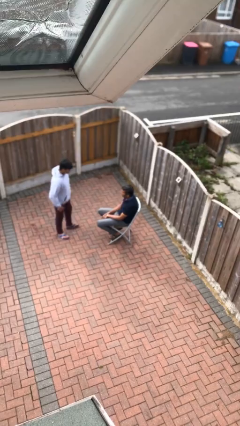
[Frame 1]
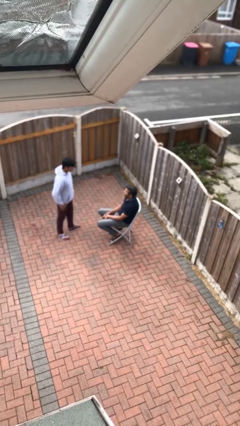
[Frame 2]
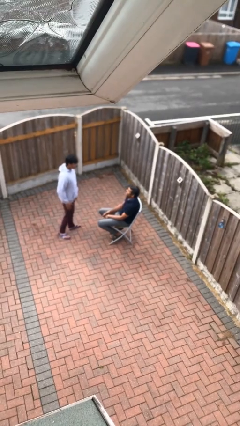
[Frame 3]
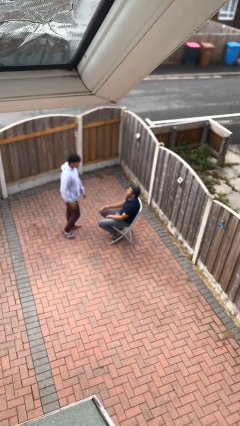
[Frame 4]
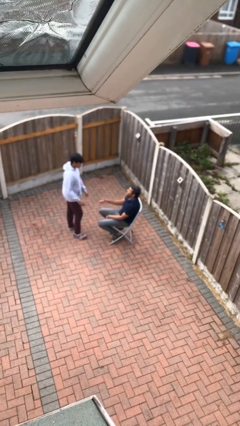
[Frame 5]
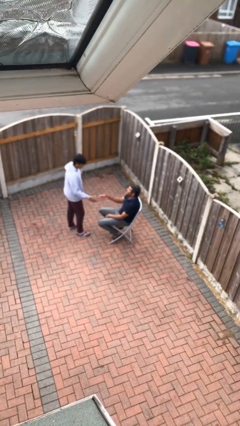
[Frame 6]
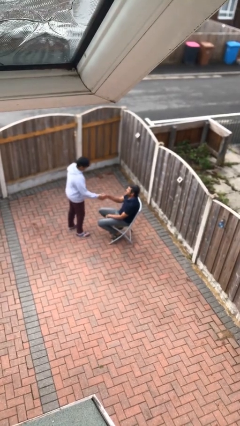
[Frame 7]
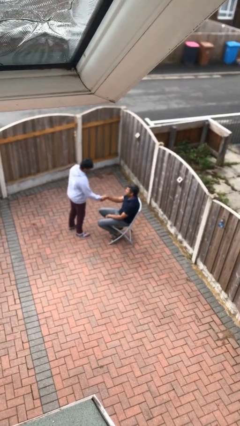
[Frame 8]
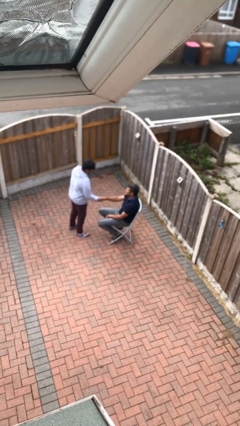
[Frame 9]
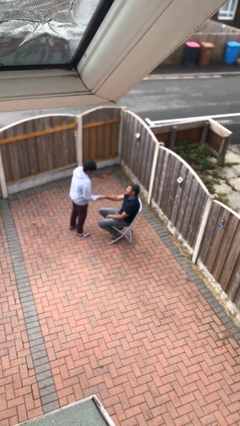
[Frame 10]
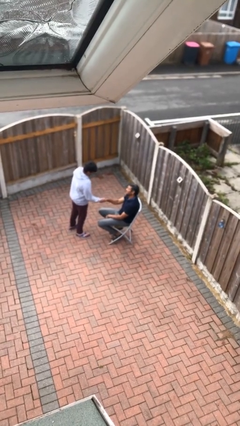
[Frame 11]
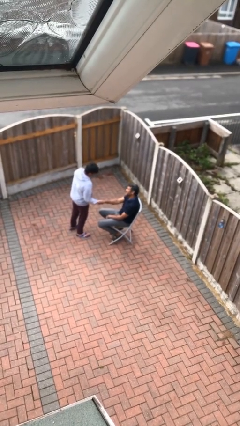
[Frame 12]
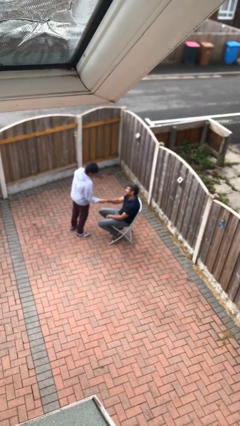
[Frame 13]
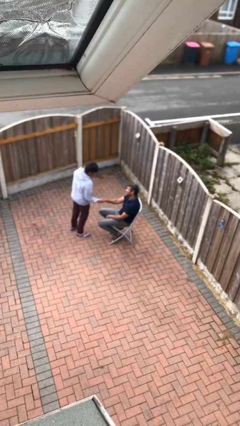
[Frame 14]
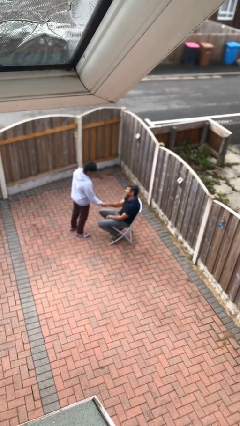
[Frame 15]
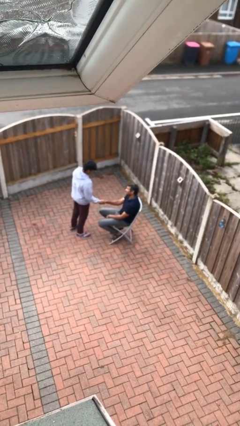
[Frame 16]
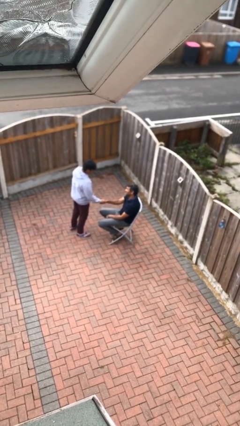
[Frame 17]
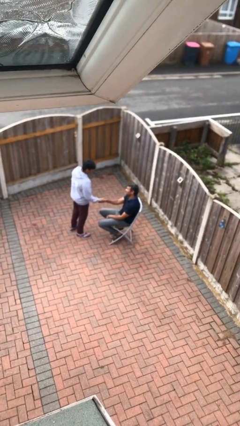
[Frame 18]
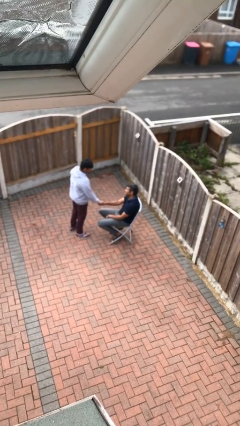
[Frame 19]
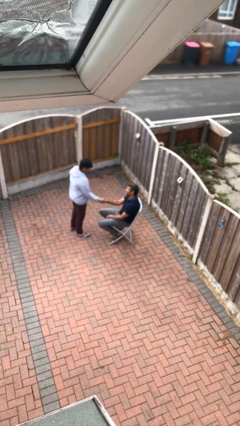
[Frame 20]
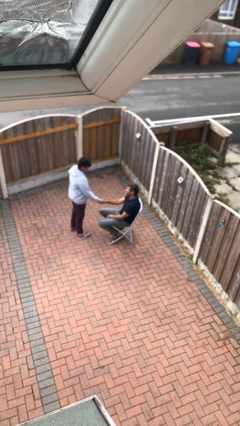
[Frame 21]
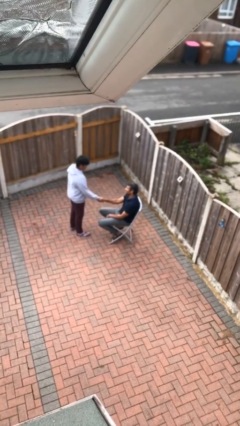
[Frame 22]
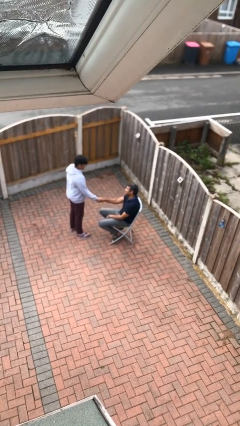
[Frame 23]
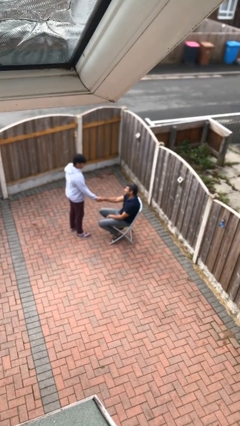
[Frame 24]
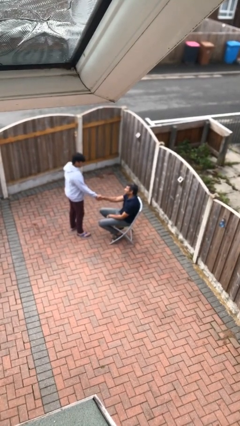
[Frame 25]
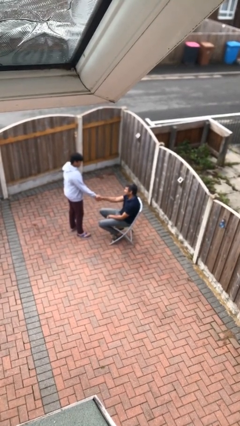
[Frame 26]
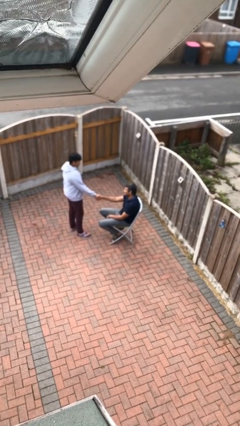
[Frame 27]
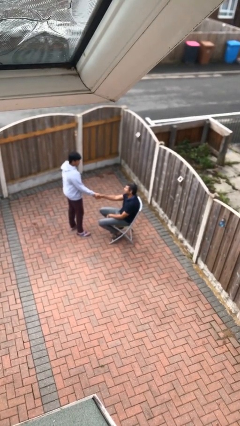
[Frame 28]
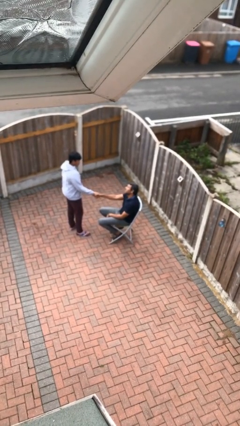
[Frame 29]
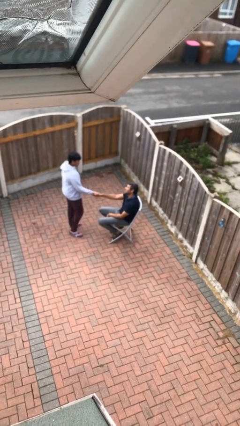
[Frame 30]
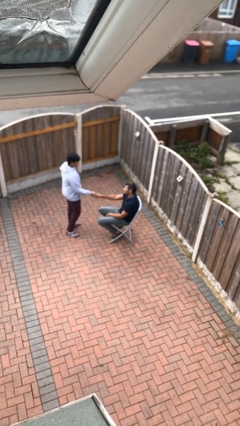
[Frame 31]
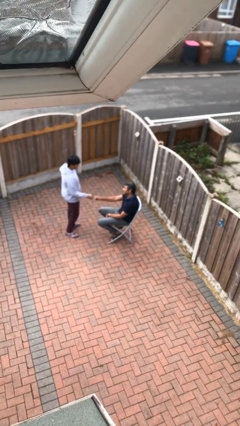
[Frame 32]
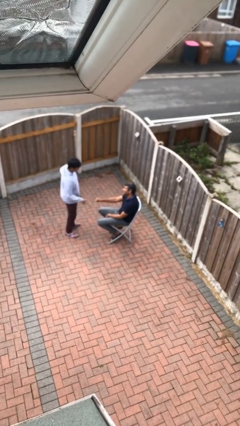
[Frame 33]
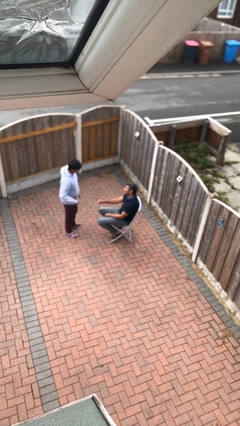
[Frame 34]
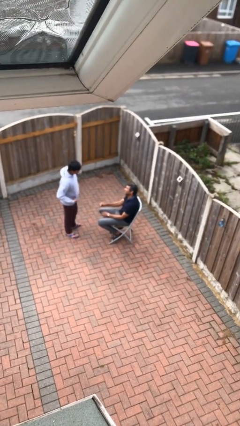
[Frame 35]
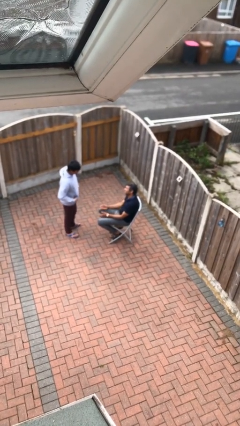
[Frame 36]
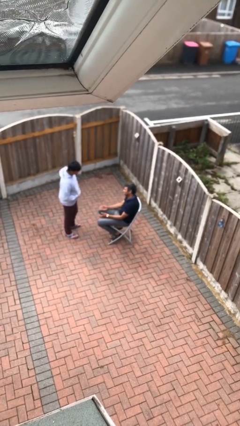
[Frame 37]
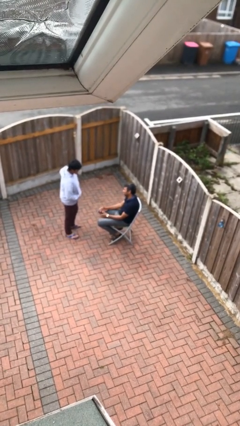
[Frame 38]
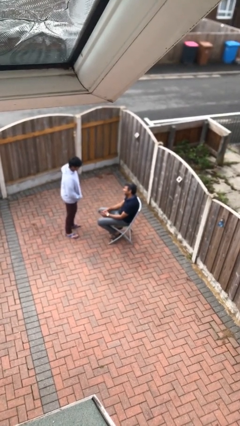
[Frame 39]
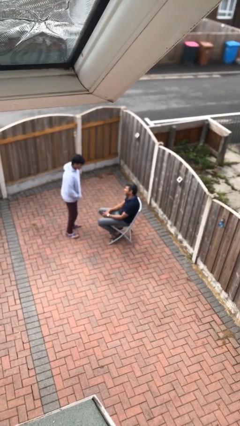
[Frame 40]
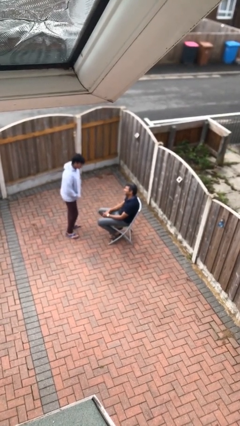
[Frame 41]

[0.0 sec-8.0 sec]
person shakes hand

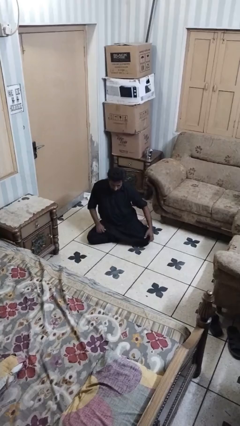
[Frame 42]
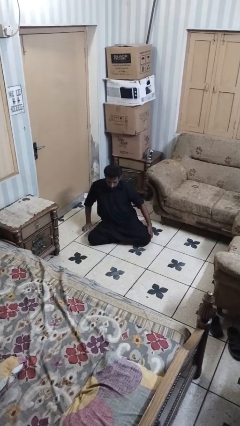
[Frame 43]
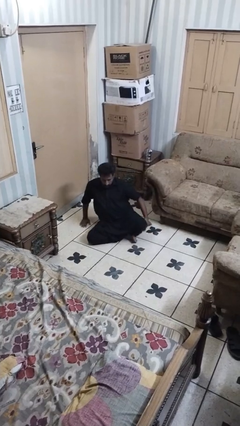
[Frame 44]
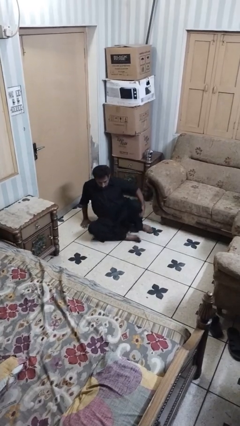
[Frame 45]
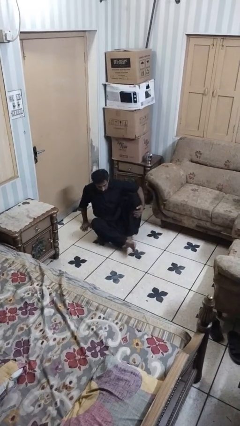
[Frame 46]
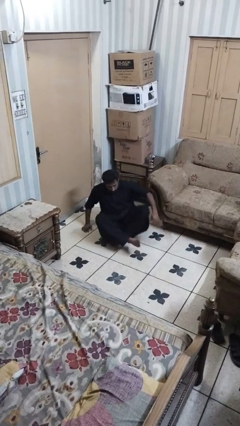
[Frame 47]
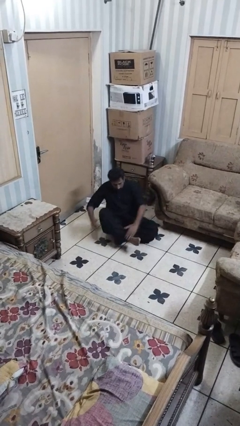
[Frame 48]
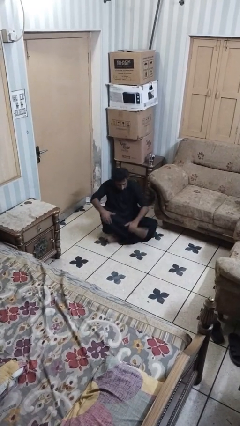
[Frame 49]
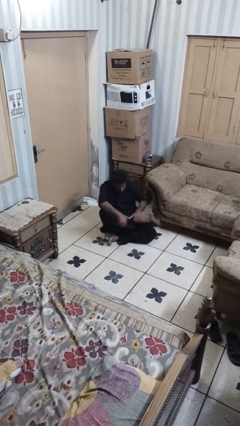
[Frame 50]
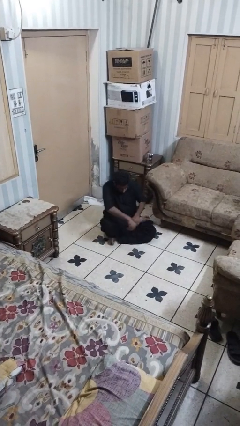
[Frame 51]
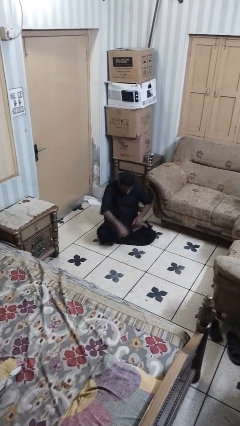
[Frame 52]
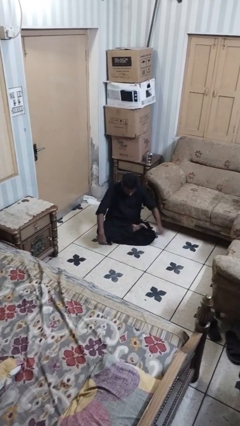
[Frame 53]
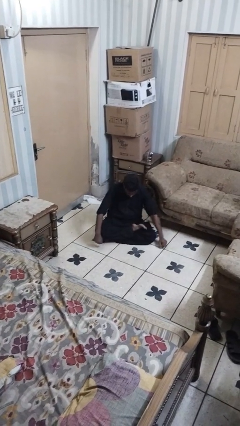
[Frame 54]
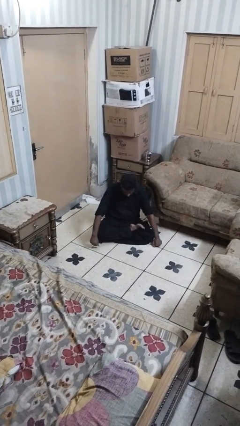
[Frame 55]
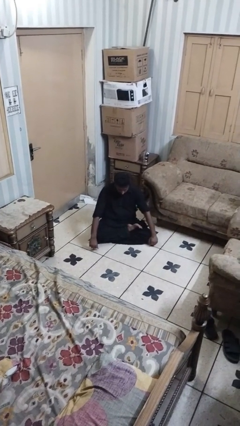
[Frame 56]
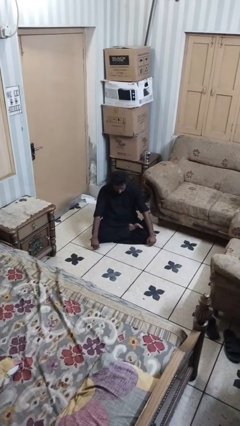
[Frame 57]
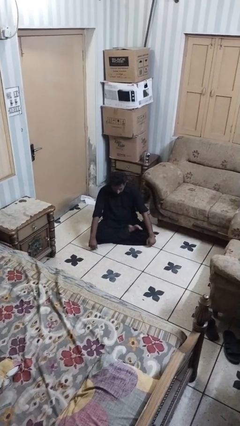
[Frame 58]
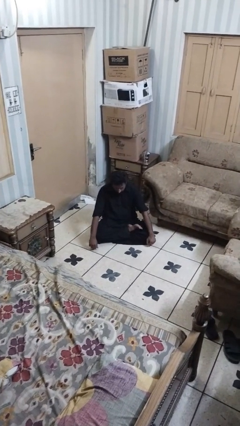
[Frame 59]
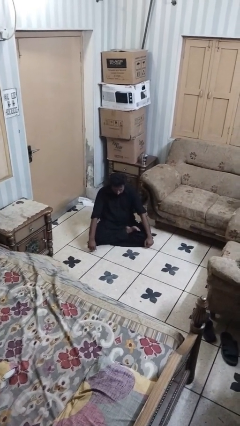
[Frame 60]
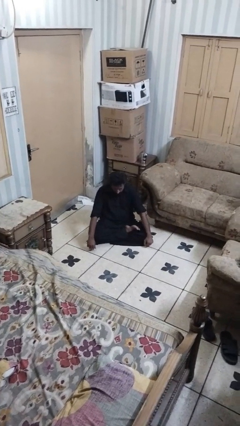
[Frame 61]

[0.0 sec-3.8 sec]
person crosses legs

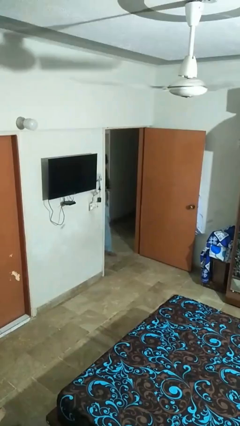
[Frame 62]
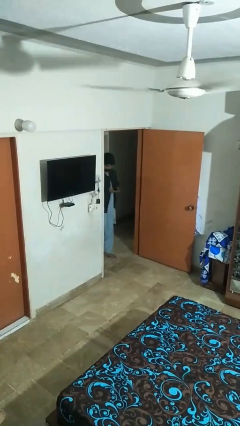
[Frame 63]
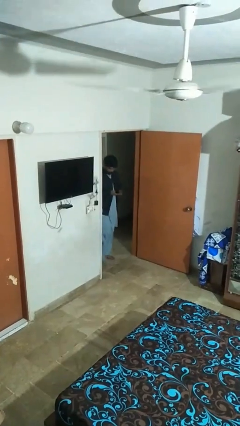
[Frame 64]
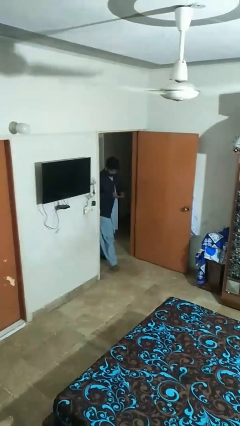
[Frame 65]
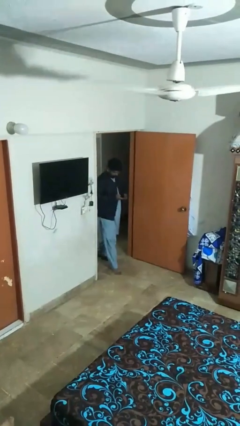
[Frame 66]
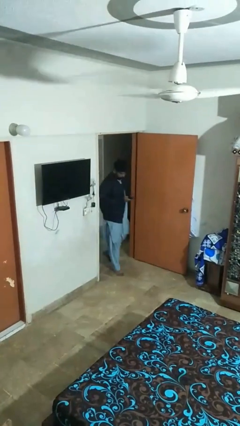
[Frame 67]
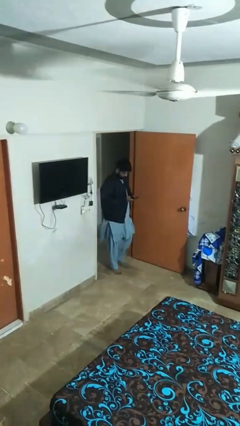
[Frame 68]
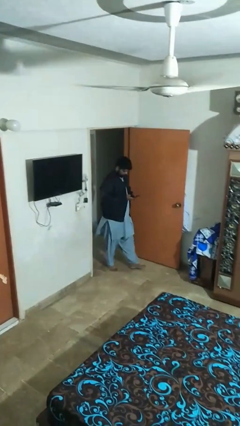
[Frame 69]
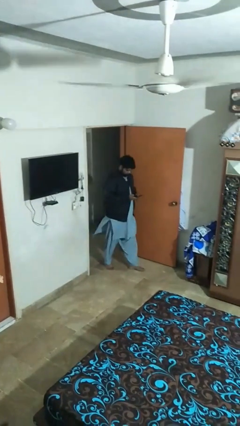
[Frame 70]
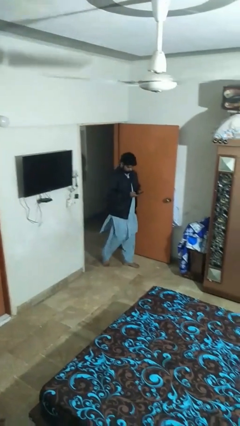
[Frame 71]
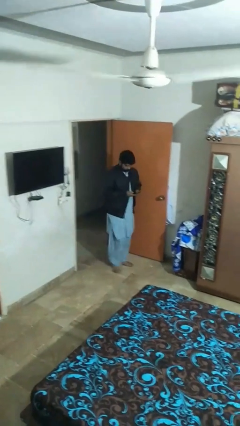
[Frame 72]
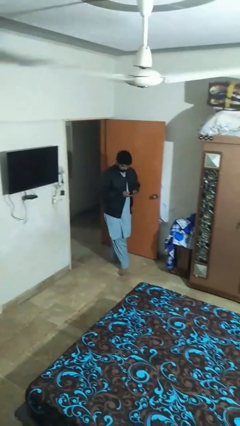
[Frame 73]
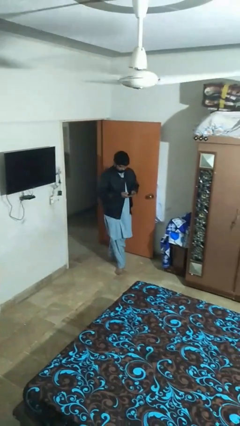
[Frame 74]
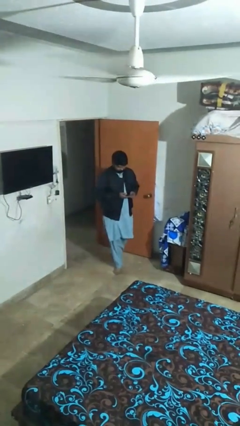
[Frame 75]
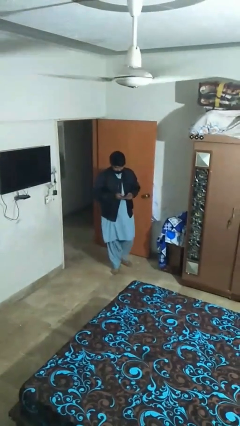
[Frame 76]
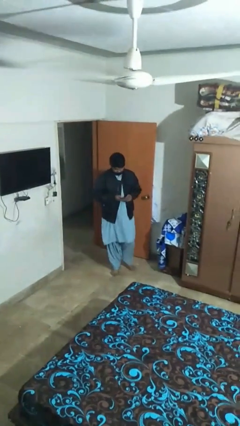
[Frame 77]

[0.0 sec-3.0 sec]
person enters scene through structure

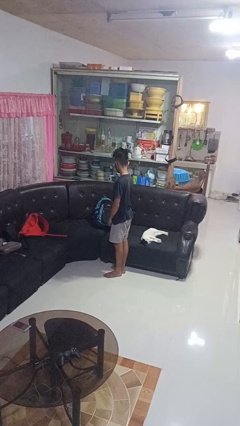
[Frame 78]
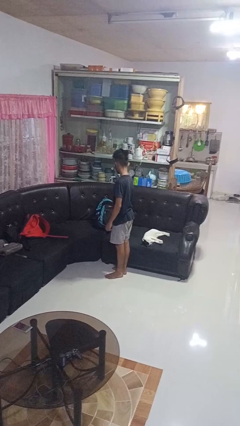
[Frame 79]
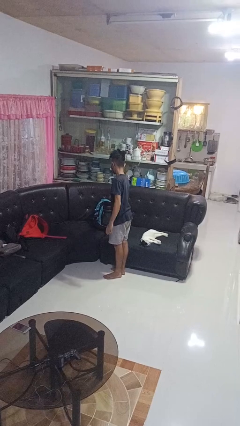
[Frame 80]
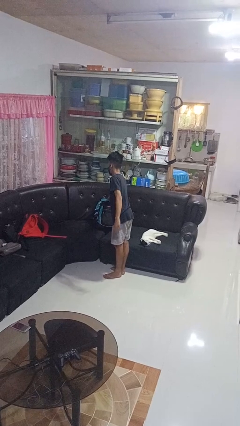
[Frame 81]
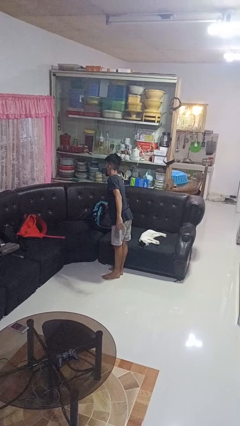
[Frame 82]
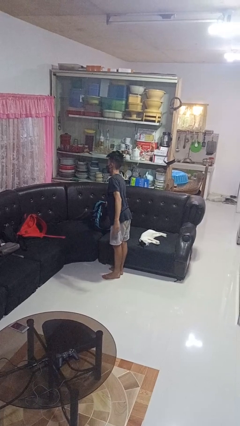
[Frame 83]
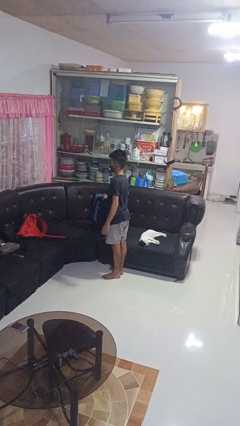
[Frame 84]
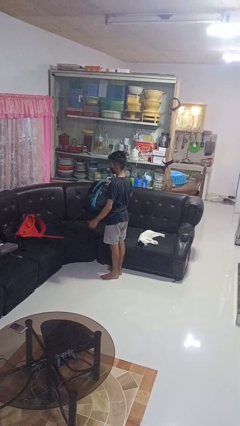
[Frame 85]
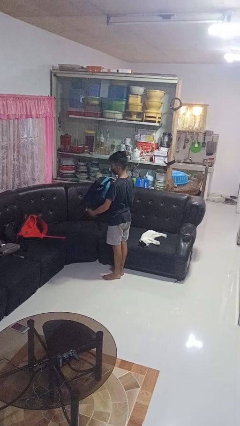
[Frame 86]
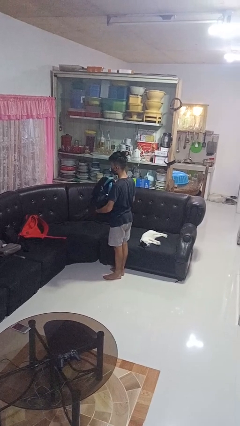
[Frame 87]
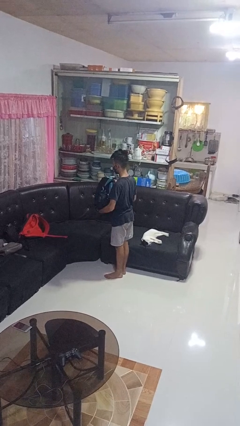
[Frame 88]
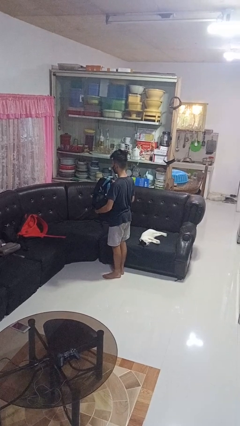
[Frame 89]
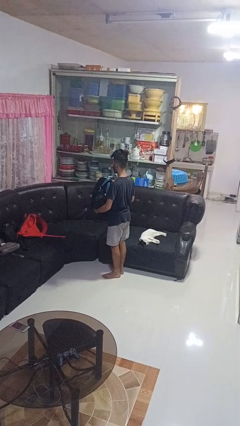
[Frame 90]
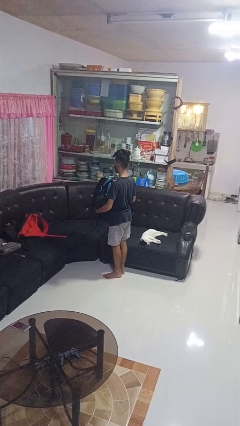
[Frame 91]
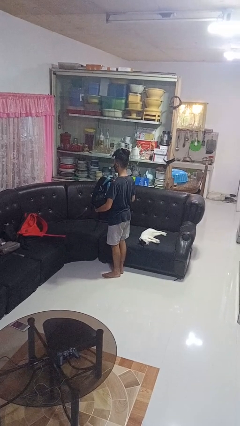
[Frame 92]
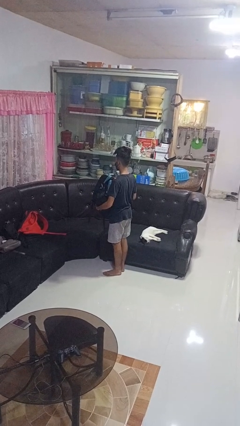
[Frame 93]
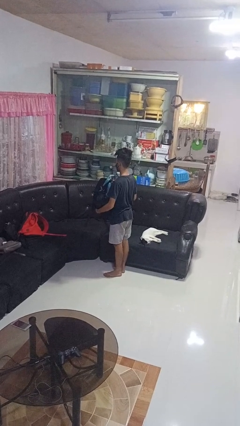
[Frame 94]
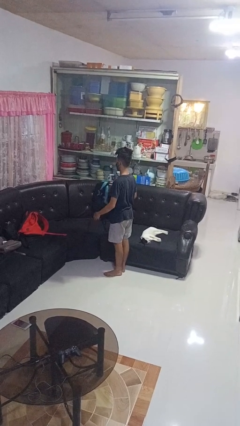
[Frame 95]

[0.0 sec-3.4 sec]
person picks up object from couch
